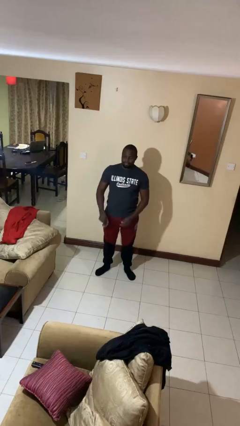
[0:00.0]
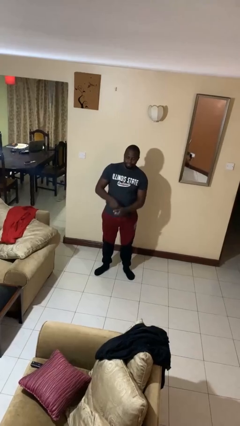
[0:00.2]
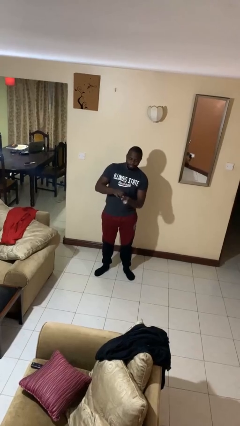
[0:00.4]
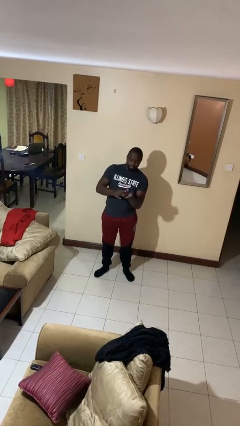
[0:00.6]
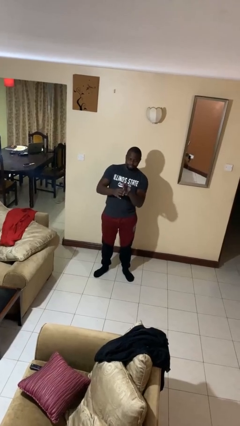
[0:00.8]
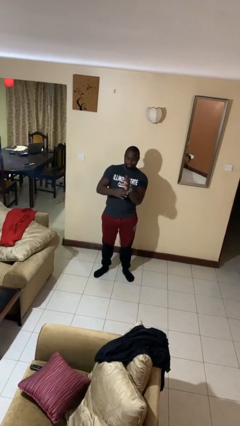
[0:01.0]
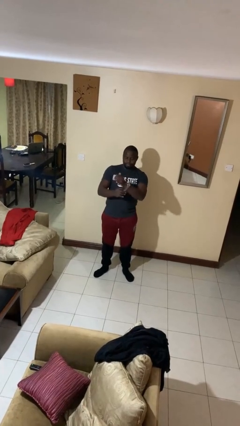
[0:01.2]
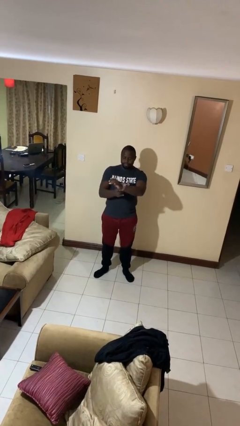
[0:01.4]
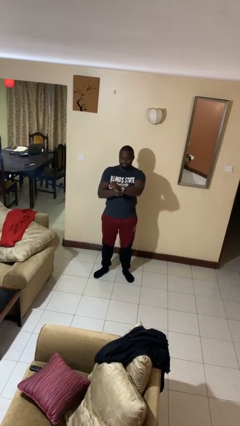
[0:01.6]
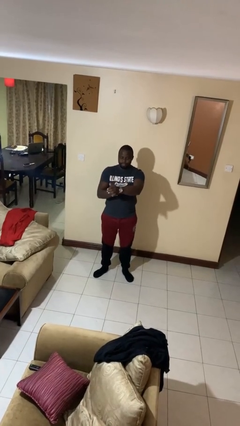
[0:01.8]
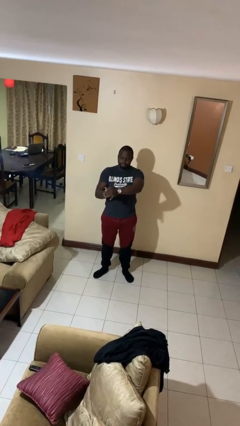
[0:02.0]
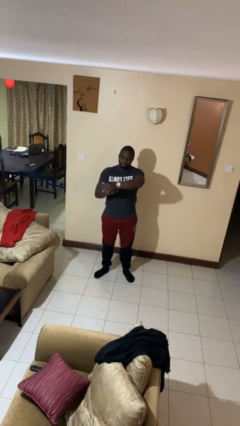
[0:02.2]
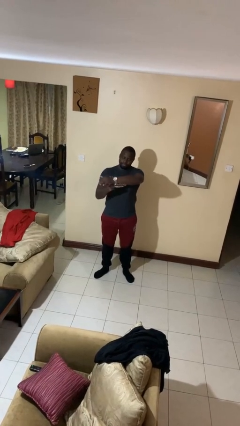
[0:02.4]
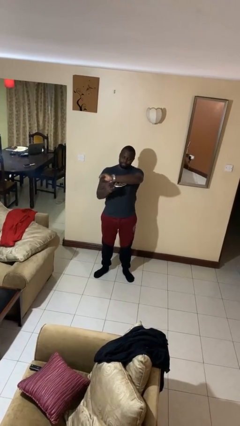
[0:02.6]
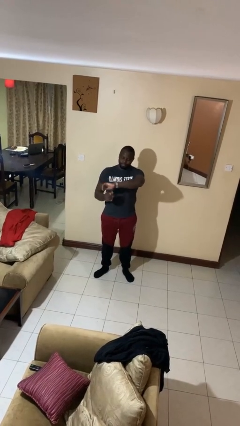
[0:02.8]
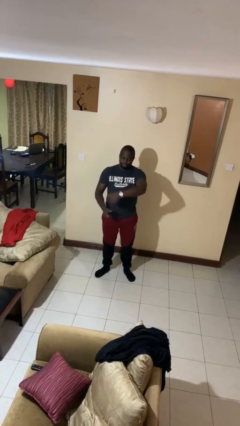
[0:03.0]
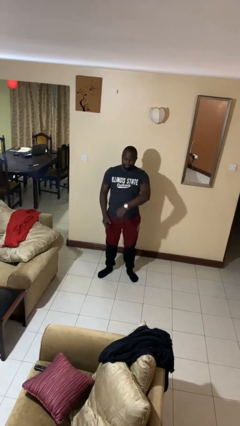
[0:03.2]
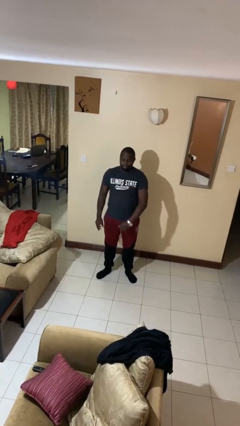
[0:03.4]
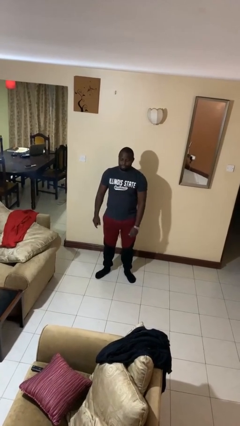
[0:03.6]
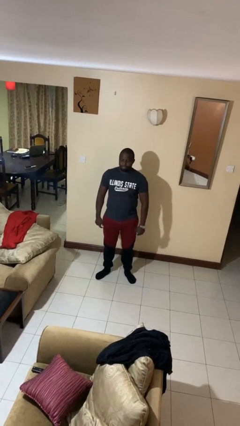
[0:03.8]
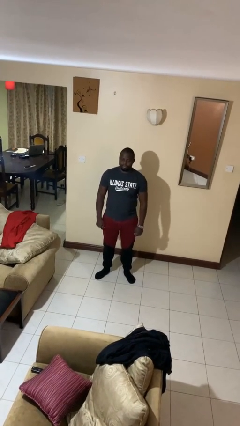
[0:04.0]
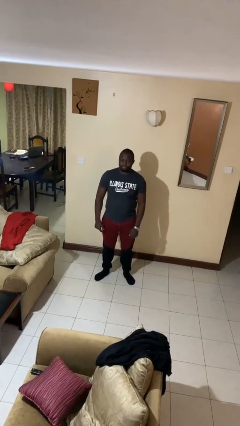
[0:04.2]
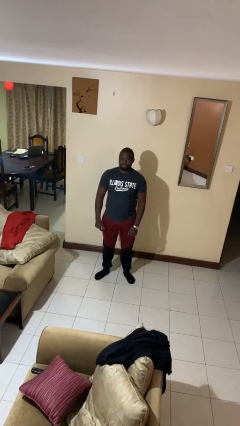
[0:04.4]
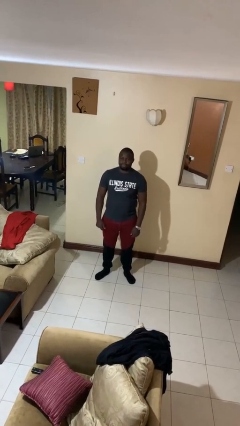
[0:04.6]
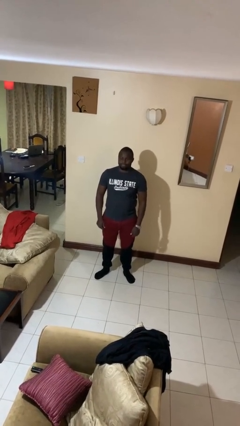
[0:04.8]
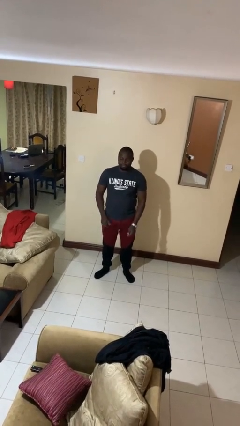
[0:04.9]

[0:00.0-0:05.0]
person puts on wristwatch

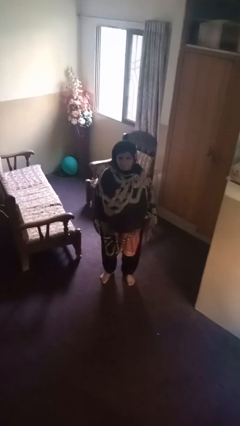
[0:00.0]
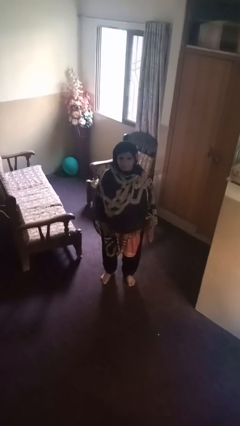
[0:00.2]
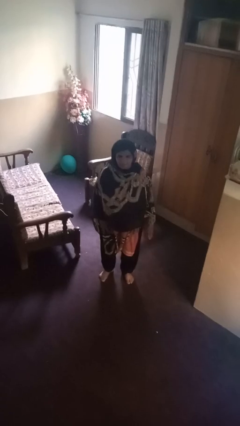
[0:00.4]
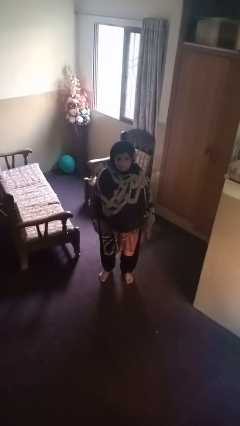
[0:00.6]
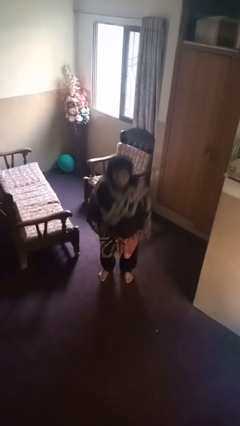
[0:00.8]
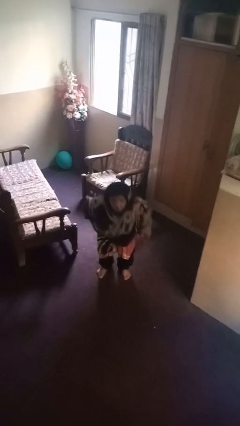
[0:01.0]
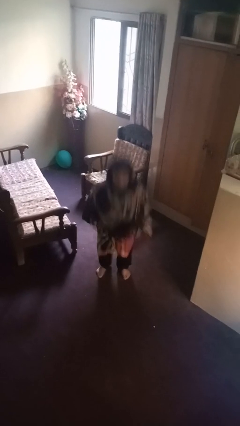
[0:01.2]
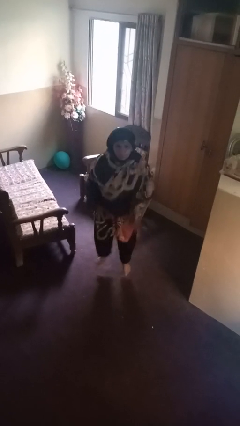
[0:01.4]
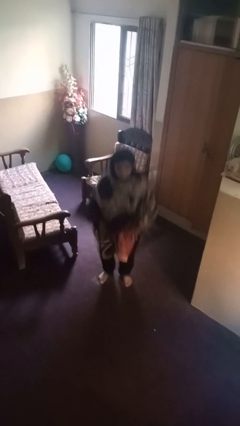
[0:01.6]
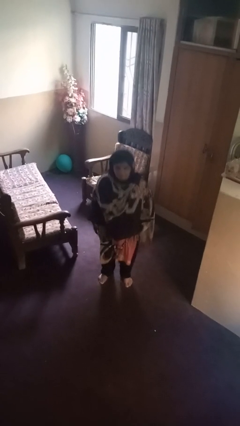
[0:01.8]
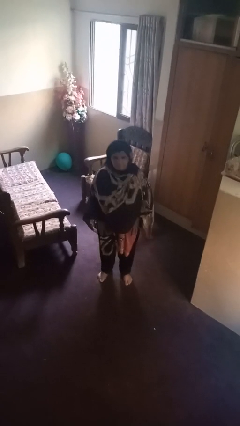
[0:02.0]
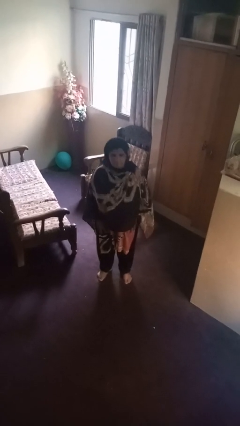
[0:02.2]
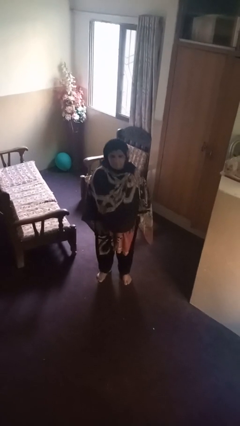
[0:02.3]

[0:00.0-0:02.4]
person jumps

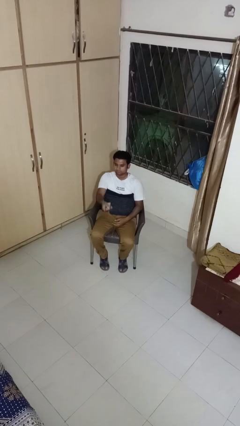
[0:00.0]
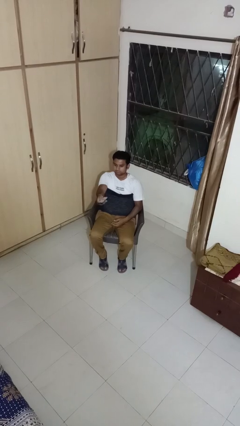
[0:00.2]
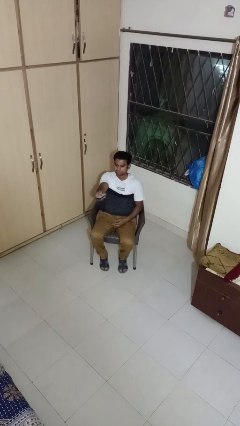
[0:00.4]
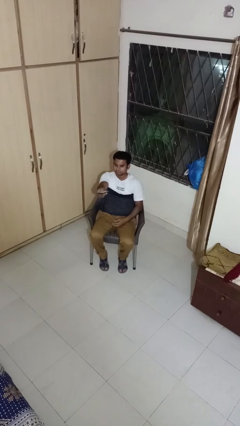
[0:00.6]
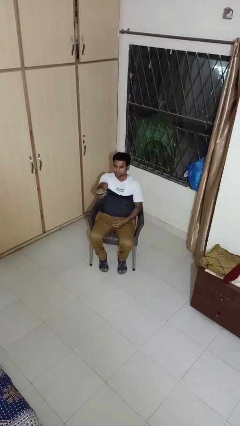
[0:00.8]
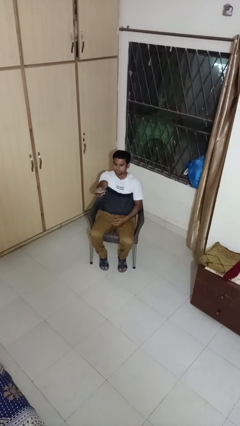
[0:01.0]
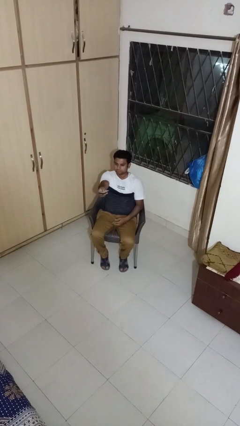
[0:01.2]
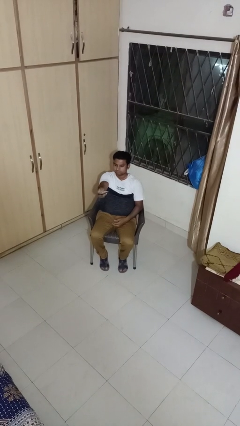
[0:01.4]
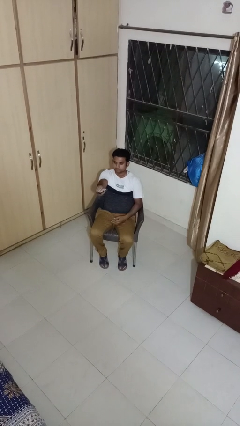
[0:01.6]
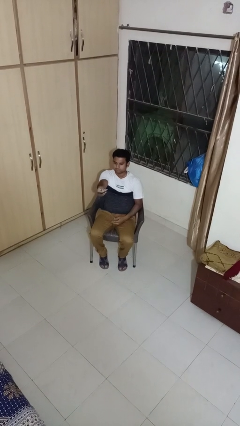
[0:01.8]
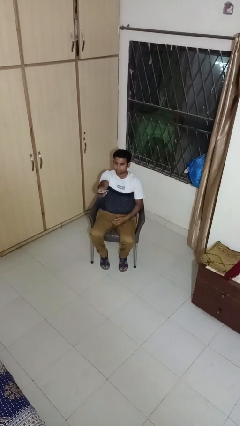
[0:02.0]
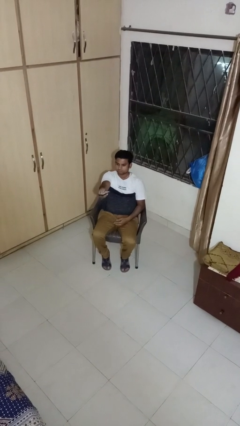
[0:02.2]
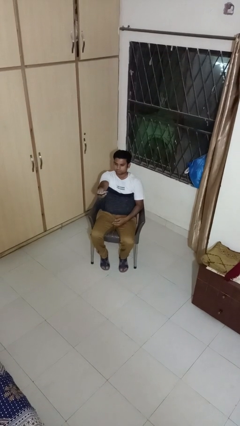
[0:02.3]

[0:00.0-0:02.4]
person uses television remote

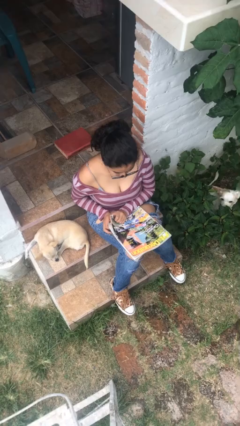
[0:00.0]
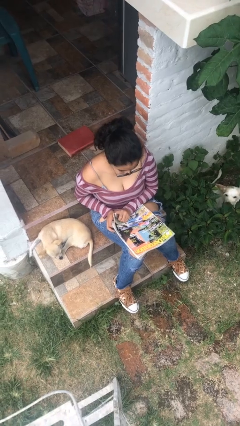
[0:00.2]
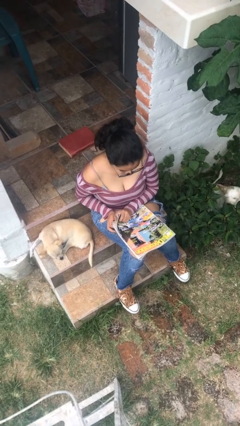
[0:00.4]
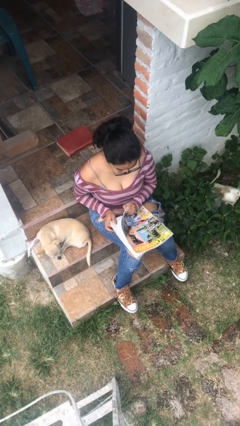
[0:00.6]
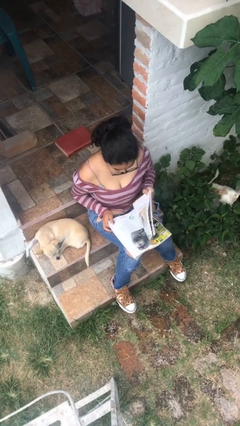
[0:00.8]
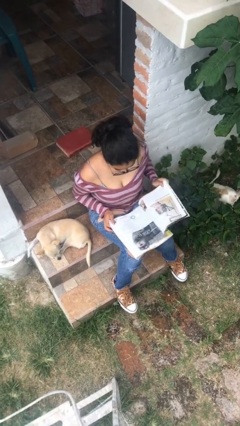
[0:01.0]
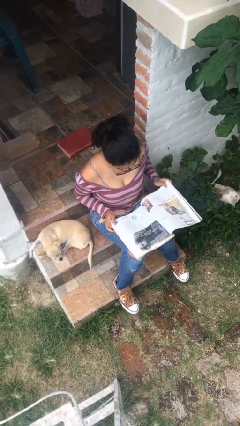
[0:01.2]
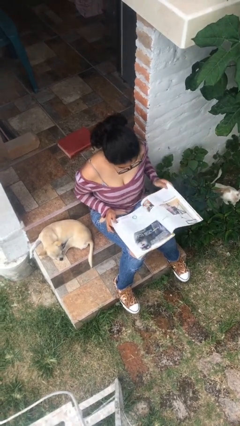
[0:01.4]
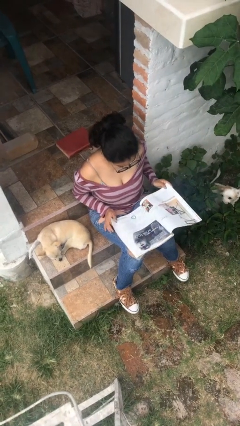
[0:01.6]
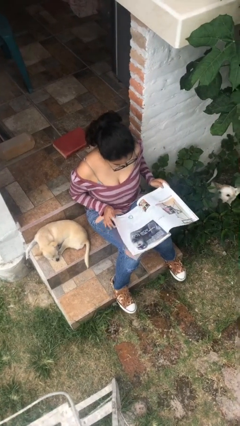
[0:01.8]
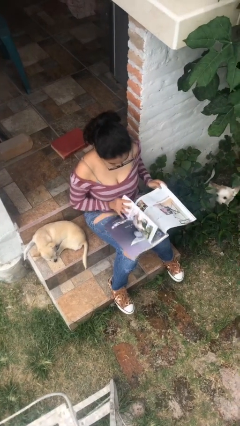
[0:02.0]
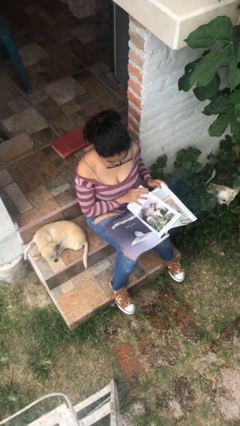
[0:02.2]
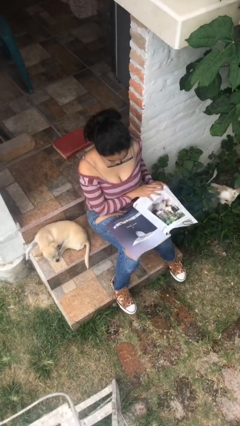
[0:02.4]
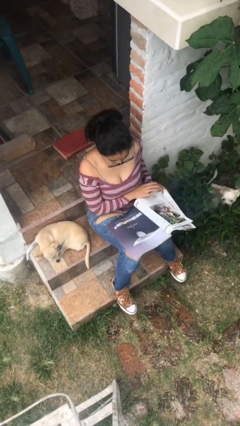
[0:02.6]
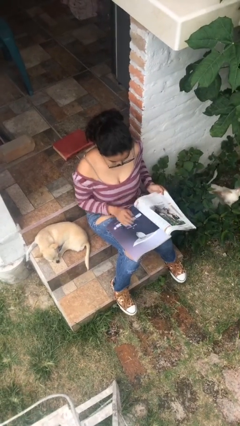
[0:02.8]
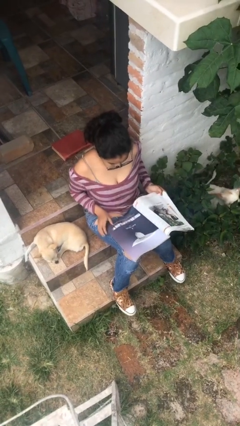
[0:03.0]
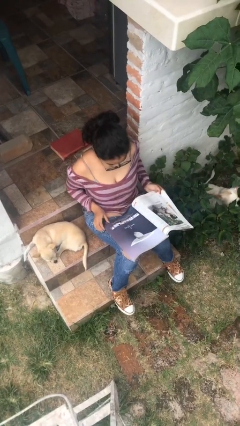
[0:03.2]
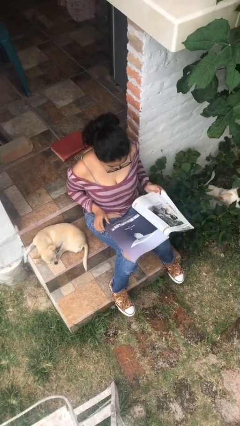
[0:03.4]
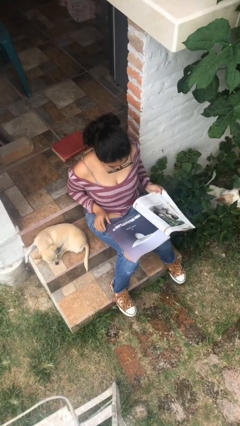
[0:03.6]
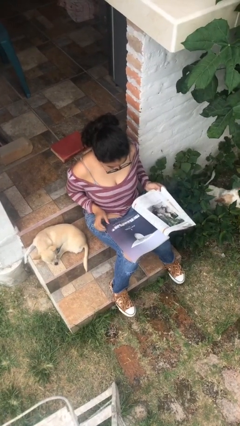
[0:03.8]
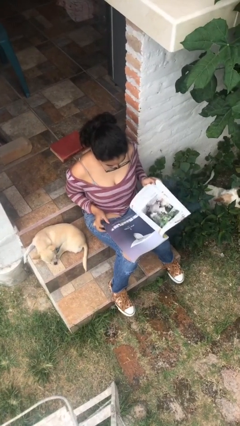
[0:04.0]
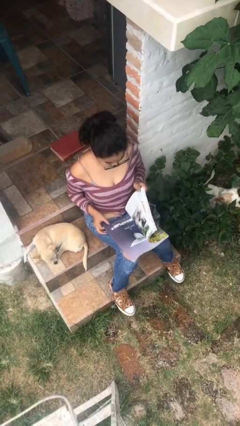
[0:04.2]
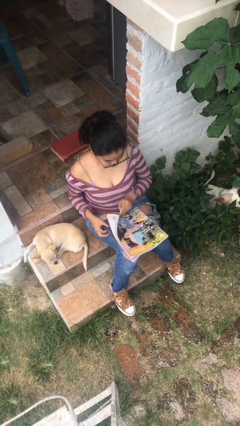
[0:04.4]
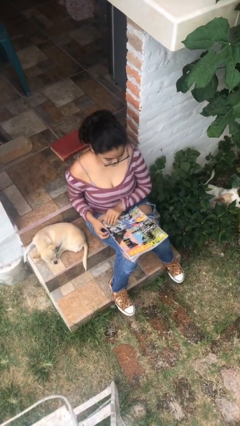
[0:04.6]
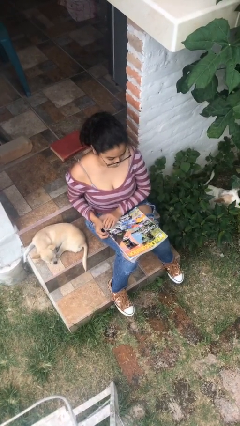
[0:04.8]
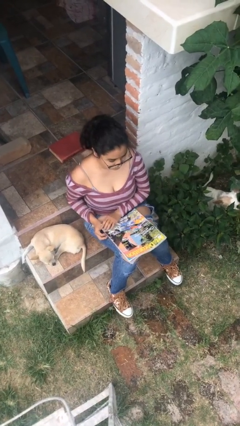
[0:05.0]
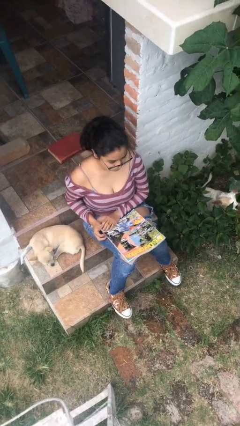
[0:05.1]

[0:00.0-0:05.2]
person reads magazine

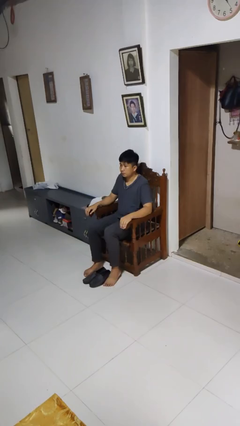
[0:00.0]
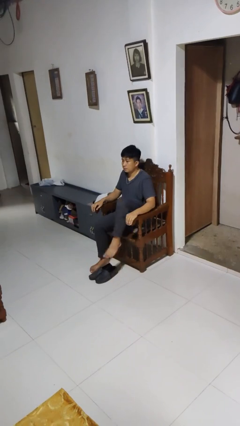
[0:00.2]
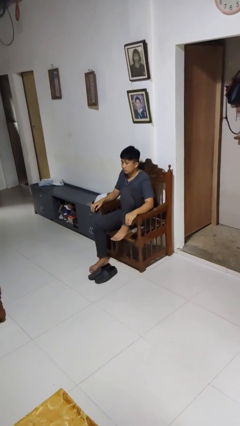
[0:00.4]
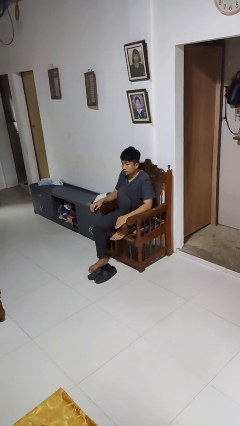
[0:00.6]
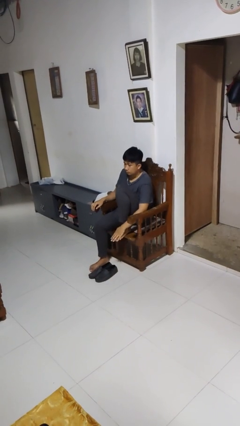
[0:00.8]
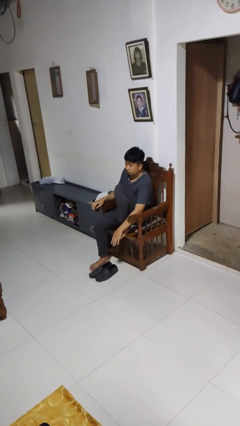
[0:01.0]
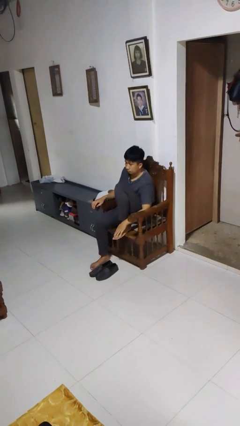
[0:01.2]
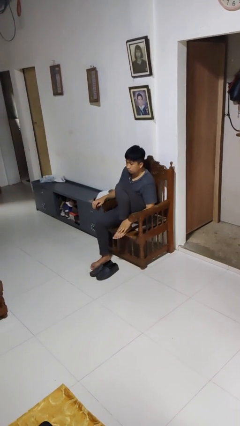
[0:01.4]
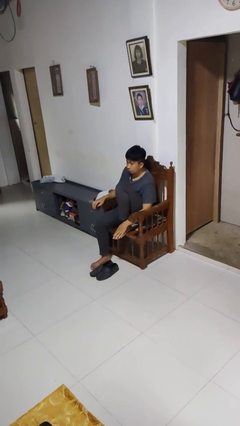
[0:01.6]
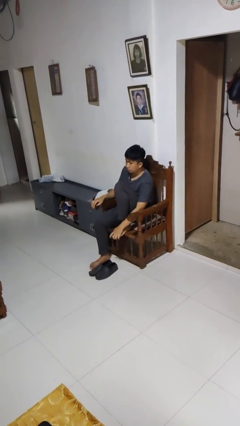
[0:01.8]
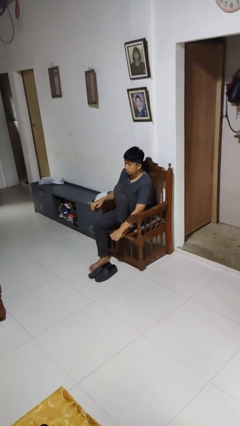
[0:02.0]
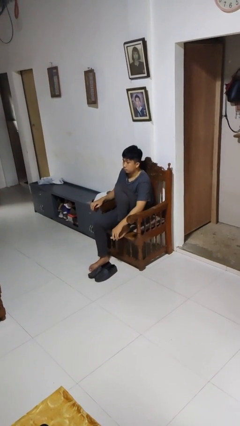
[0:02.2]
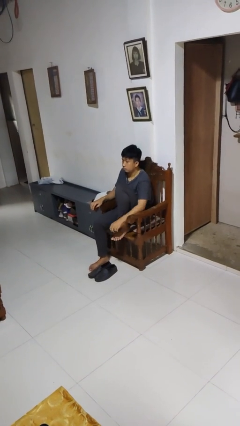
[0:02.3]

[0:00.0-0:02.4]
person rubs foot

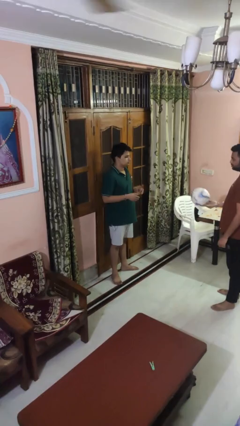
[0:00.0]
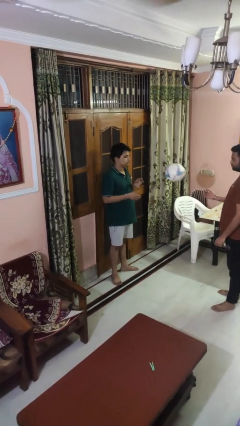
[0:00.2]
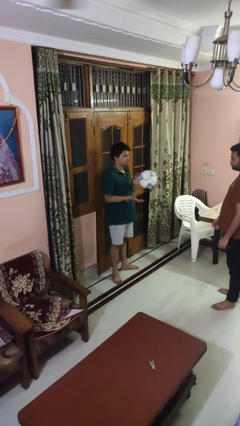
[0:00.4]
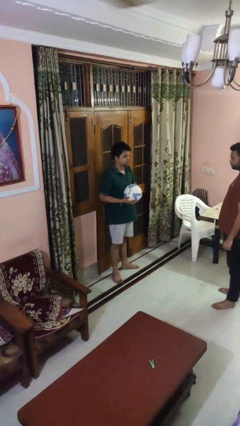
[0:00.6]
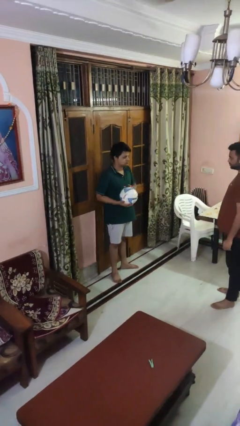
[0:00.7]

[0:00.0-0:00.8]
person catches object from person
